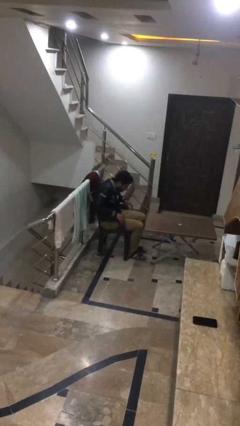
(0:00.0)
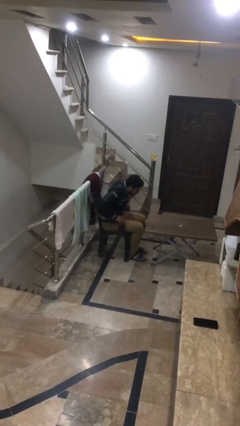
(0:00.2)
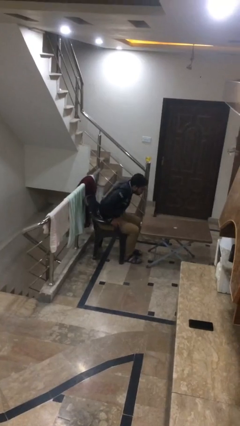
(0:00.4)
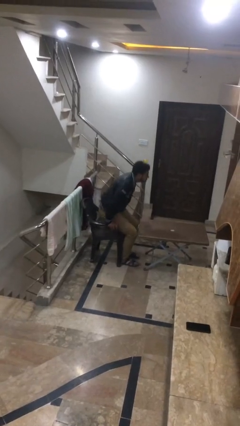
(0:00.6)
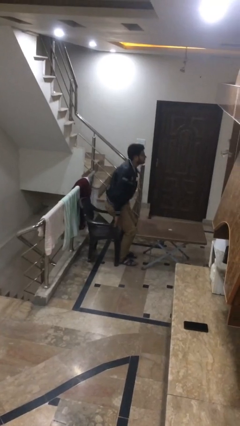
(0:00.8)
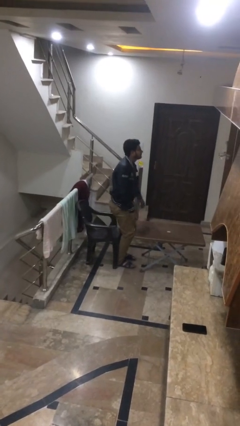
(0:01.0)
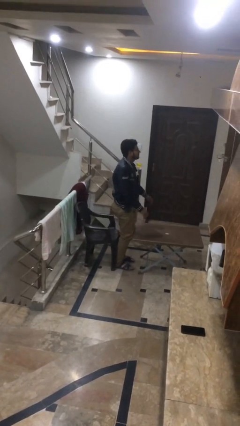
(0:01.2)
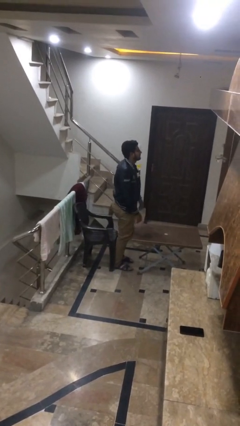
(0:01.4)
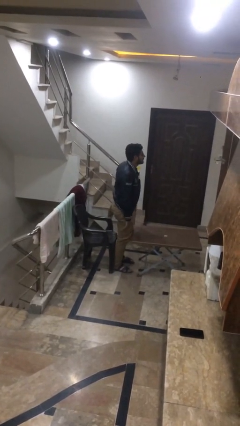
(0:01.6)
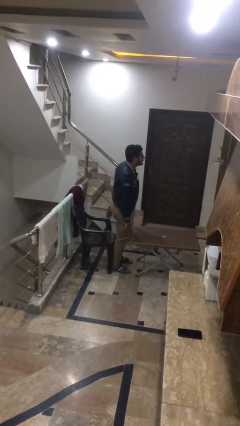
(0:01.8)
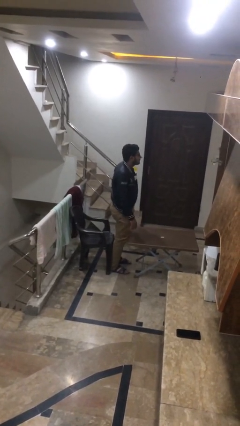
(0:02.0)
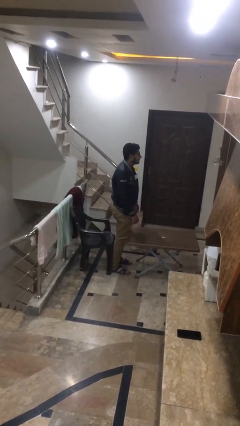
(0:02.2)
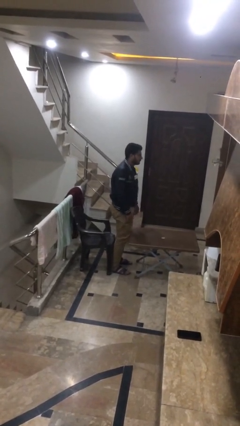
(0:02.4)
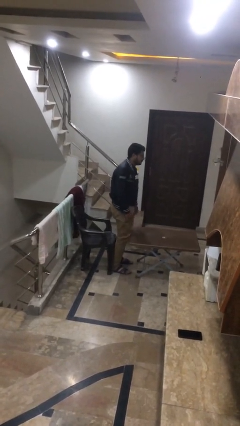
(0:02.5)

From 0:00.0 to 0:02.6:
person stands up

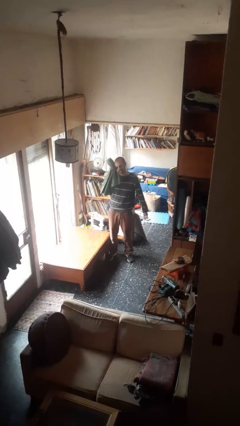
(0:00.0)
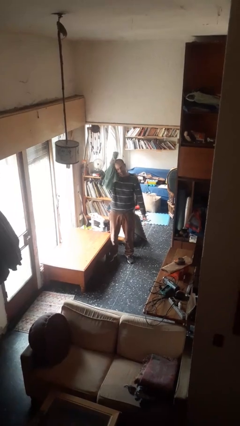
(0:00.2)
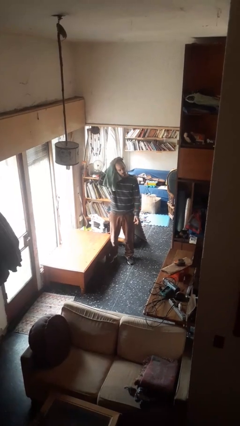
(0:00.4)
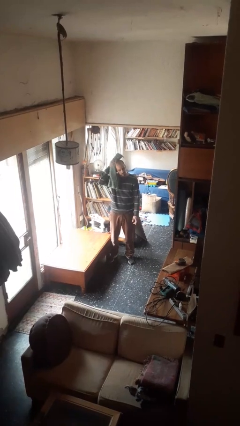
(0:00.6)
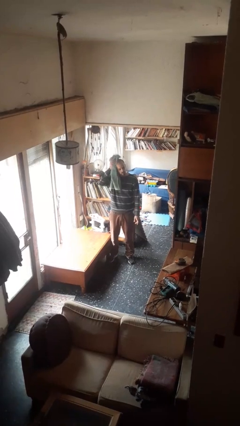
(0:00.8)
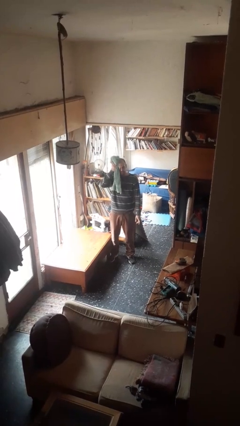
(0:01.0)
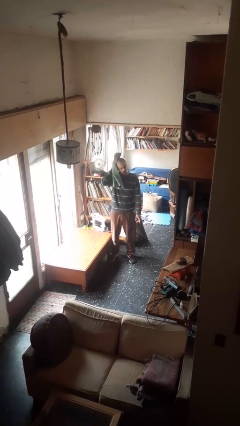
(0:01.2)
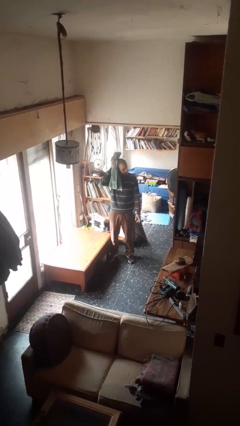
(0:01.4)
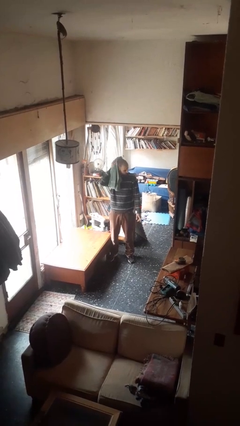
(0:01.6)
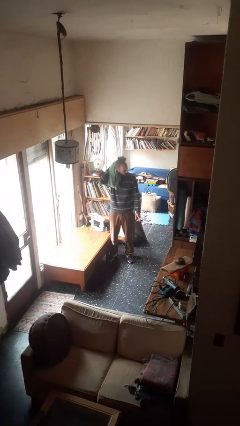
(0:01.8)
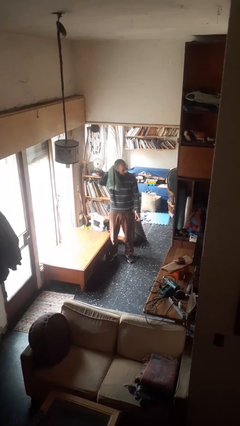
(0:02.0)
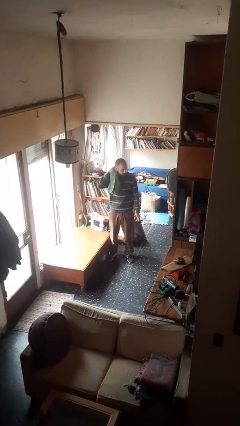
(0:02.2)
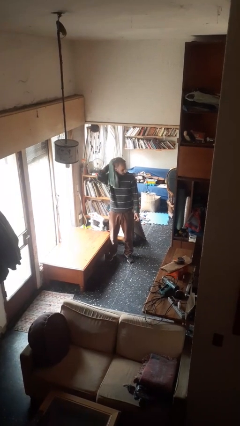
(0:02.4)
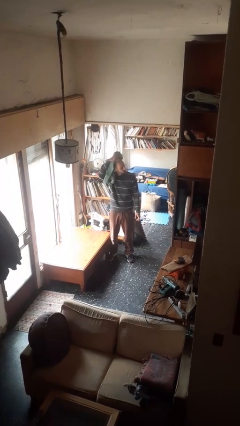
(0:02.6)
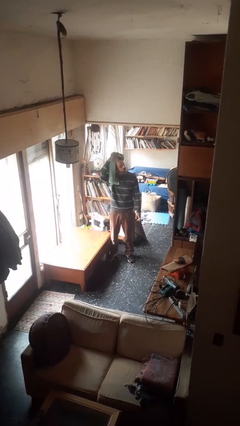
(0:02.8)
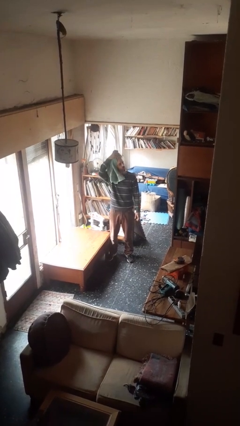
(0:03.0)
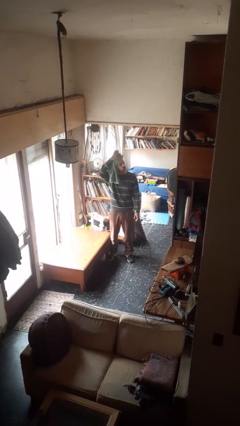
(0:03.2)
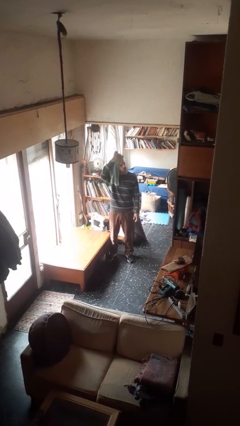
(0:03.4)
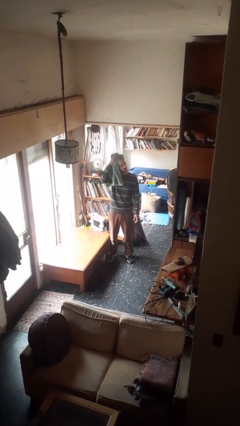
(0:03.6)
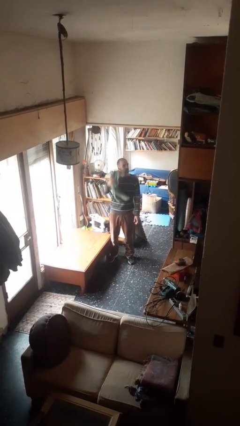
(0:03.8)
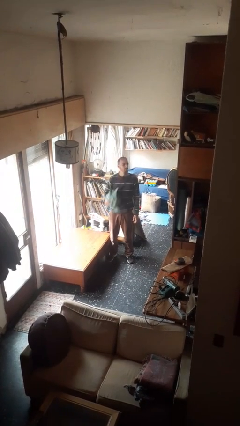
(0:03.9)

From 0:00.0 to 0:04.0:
person dries hair with towel

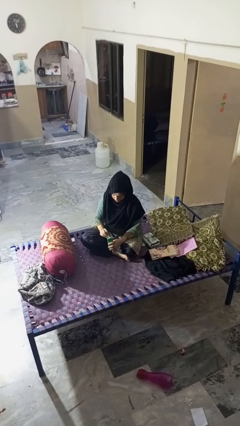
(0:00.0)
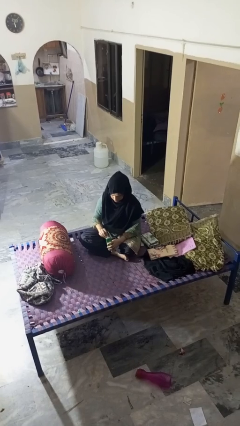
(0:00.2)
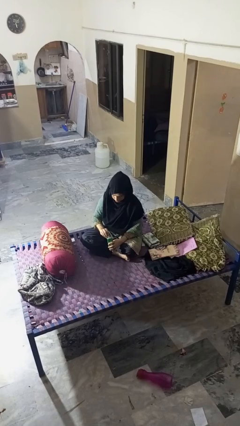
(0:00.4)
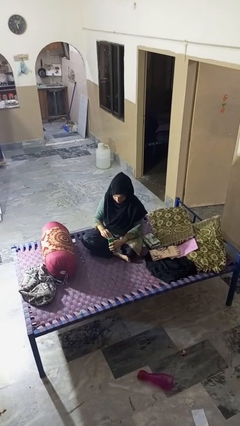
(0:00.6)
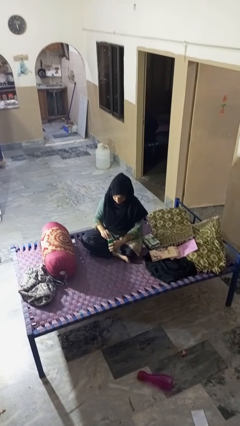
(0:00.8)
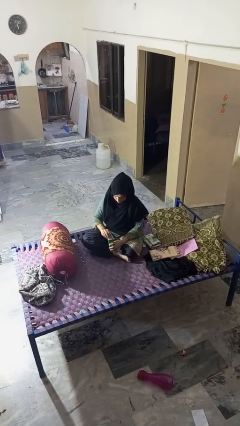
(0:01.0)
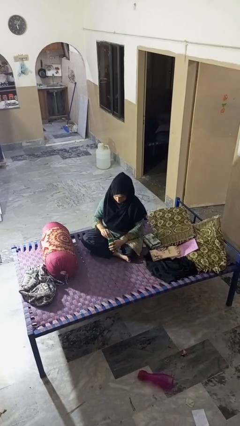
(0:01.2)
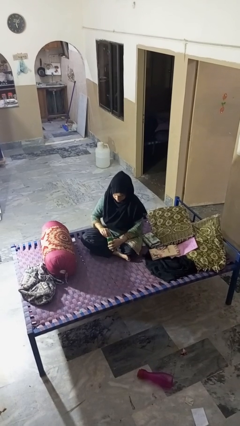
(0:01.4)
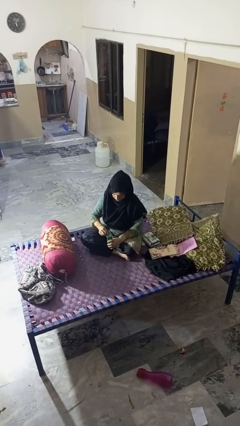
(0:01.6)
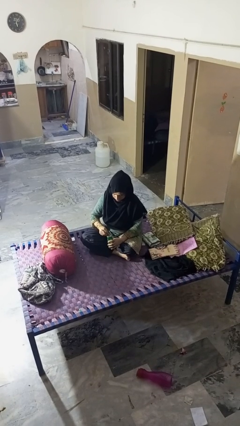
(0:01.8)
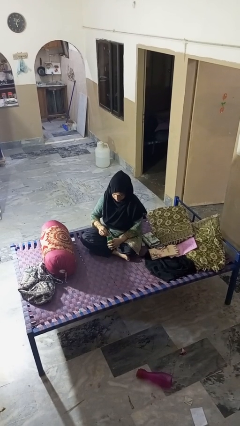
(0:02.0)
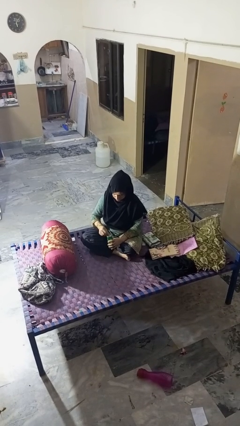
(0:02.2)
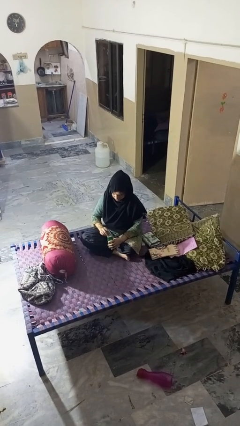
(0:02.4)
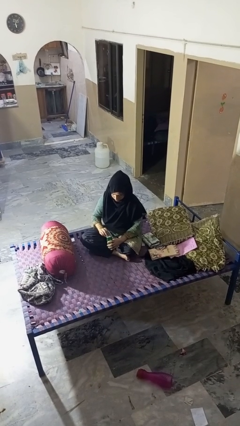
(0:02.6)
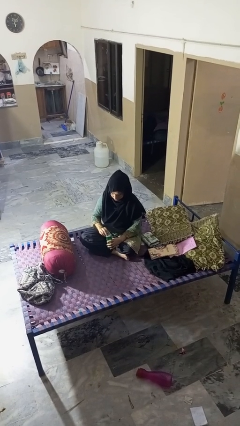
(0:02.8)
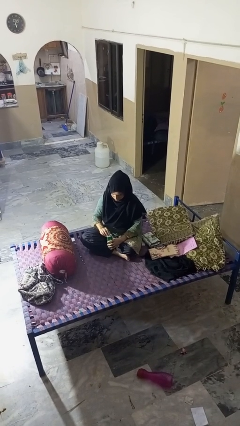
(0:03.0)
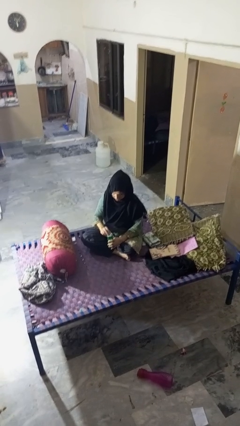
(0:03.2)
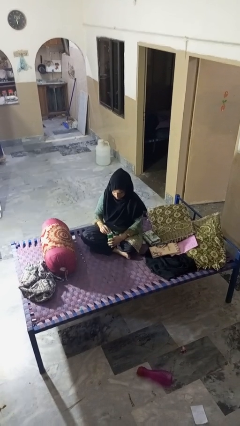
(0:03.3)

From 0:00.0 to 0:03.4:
person opens can with can opener

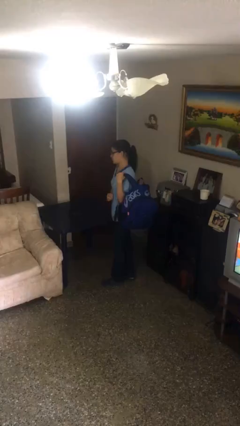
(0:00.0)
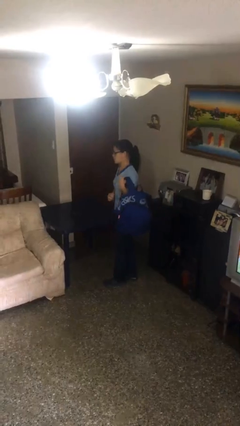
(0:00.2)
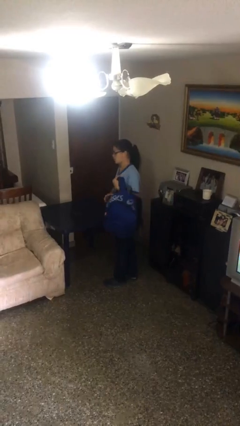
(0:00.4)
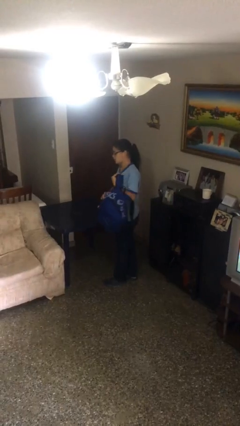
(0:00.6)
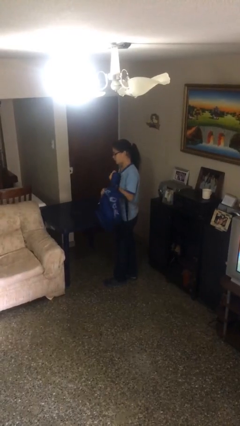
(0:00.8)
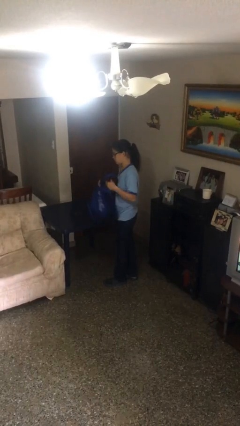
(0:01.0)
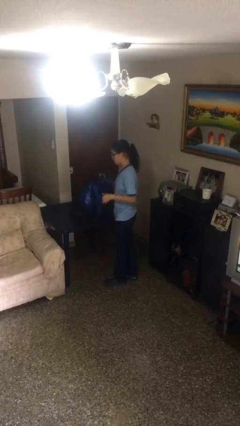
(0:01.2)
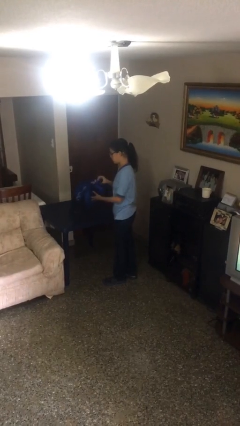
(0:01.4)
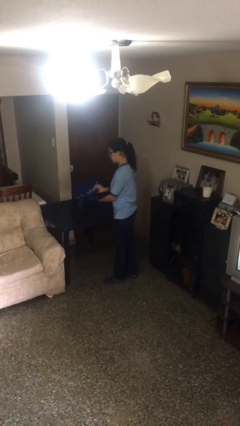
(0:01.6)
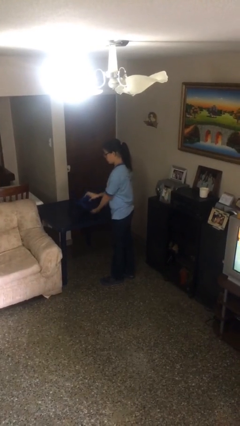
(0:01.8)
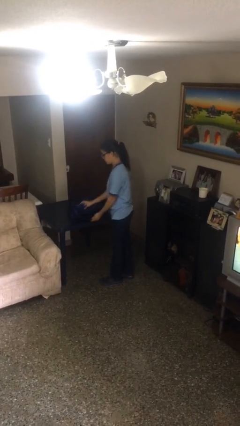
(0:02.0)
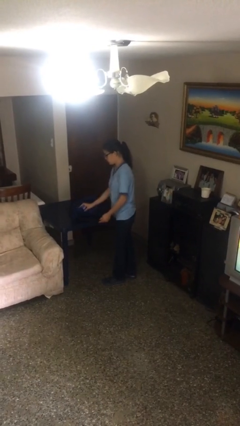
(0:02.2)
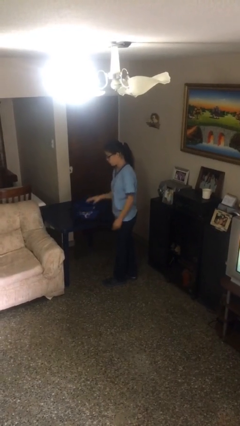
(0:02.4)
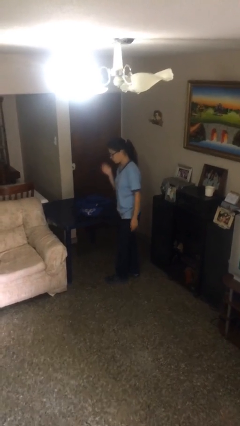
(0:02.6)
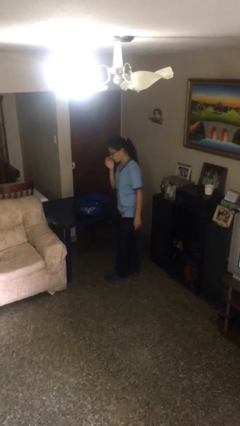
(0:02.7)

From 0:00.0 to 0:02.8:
person puts down object on table

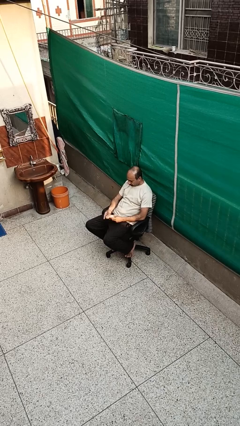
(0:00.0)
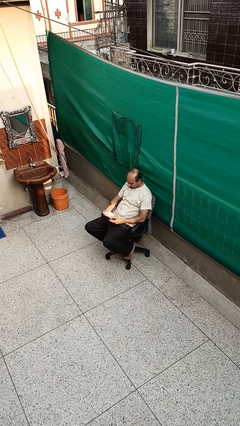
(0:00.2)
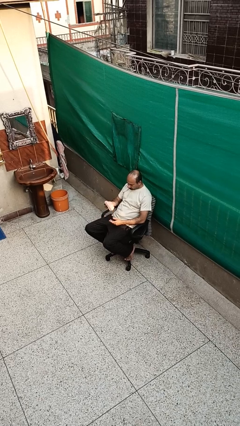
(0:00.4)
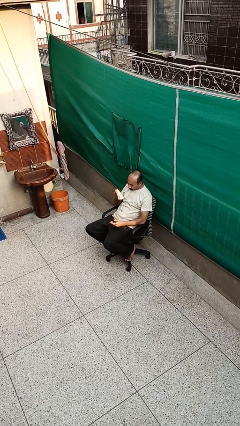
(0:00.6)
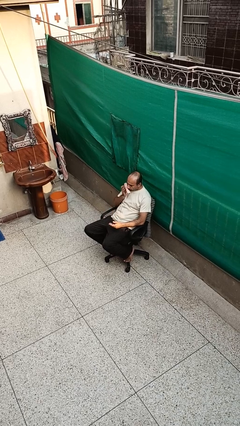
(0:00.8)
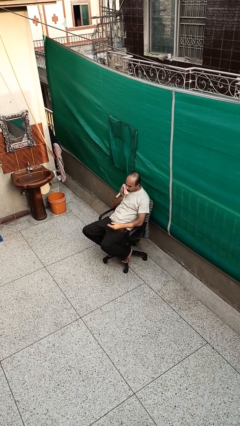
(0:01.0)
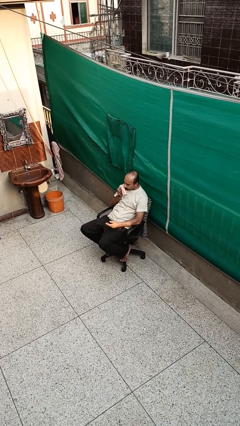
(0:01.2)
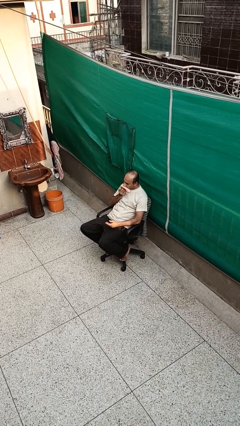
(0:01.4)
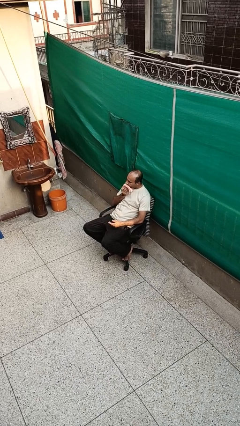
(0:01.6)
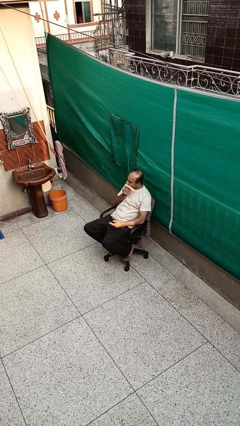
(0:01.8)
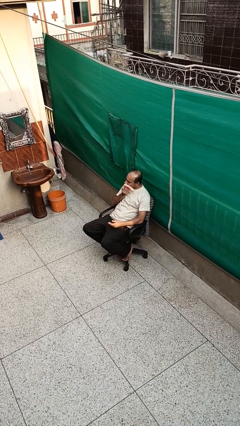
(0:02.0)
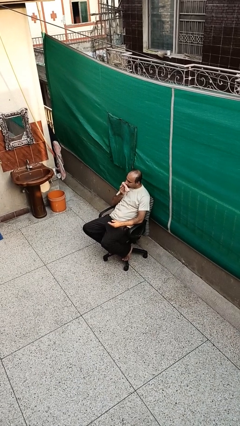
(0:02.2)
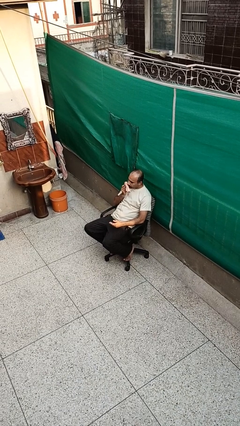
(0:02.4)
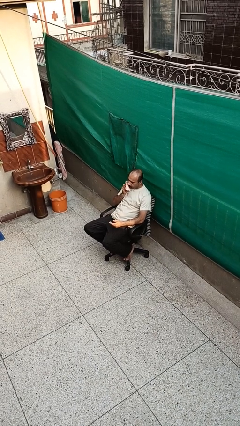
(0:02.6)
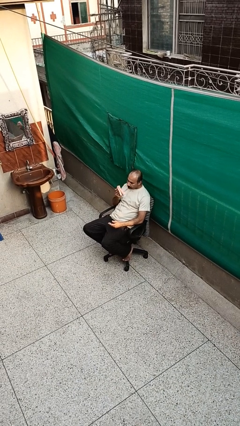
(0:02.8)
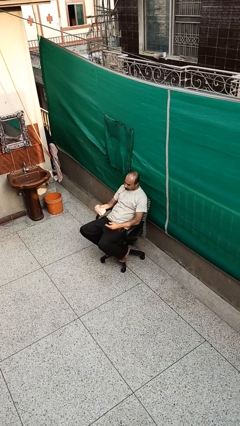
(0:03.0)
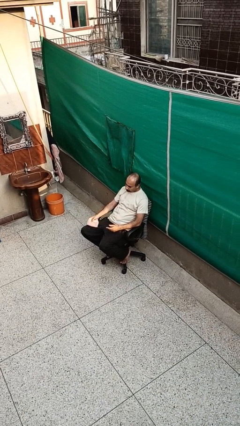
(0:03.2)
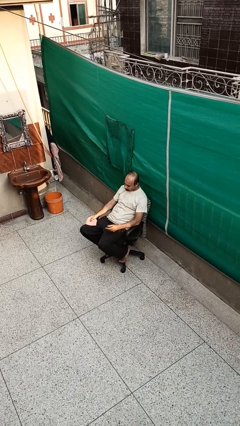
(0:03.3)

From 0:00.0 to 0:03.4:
person wipes mouth with napkin

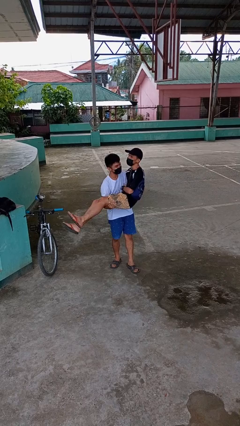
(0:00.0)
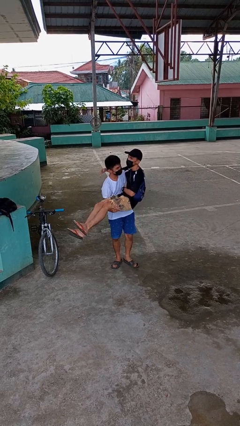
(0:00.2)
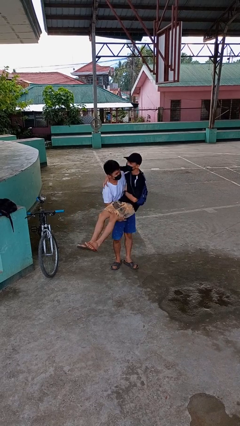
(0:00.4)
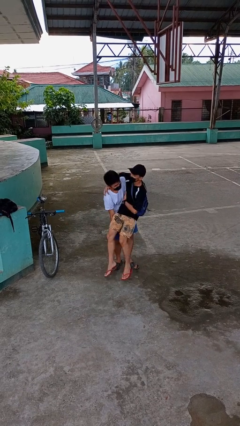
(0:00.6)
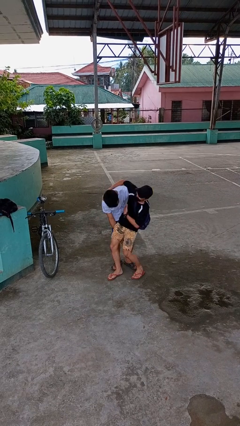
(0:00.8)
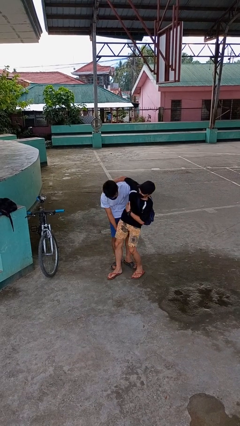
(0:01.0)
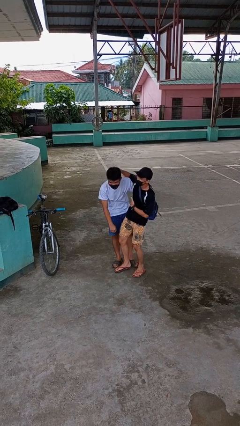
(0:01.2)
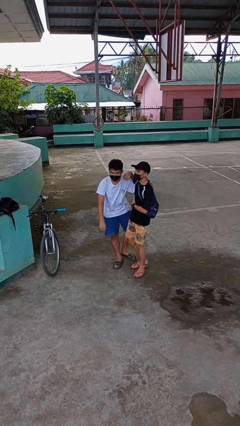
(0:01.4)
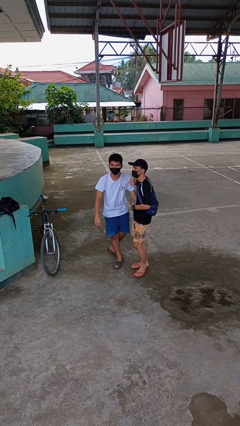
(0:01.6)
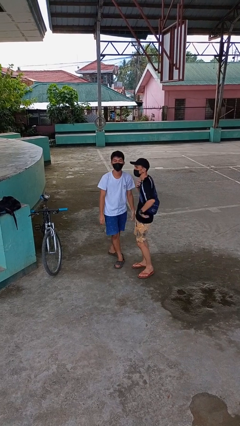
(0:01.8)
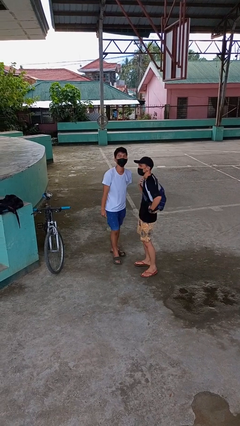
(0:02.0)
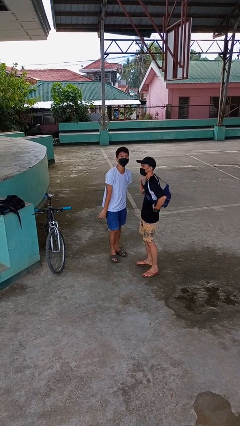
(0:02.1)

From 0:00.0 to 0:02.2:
person puts down person
